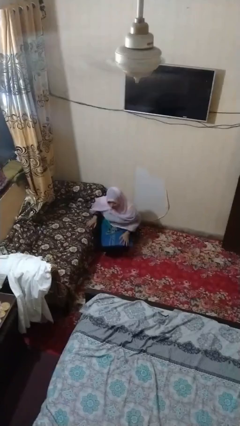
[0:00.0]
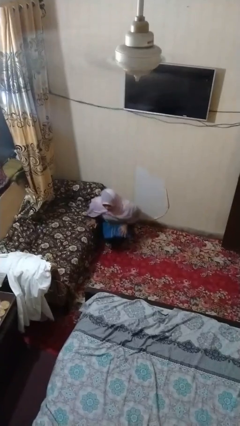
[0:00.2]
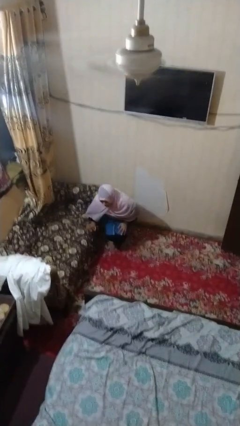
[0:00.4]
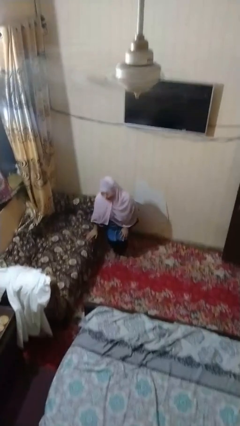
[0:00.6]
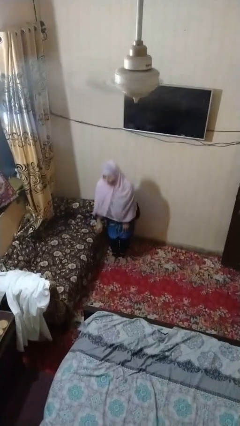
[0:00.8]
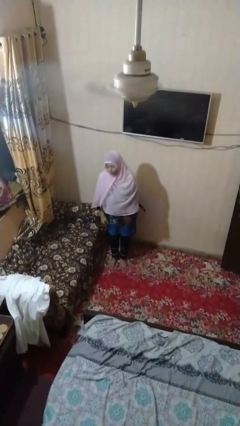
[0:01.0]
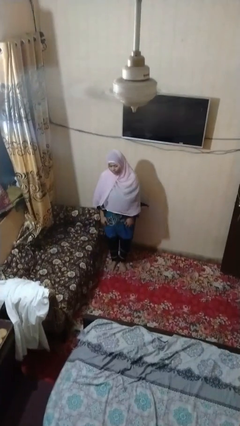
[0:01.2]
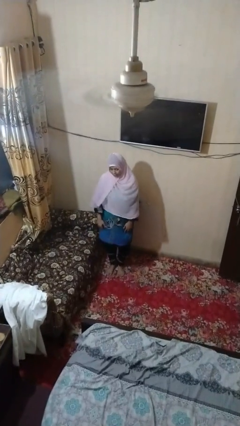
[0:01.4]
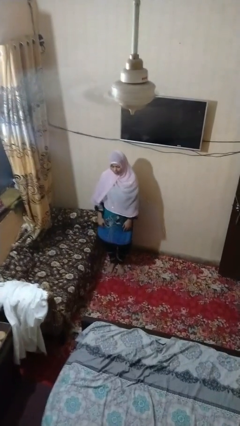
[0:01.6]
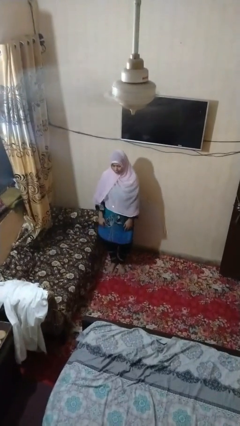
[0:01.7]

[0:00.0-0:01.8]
person stands up

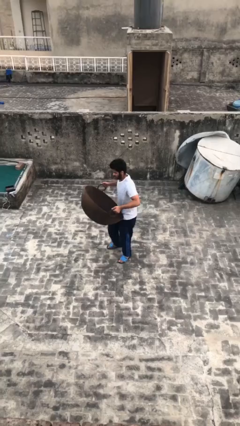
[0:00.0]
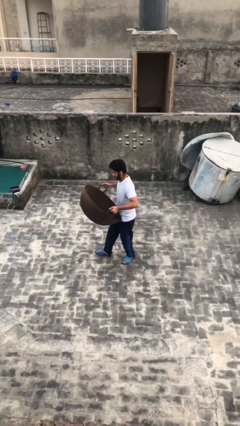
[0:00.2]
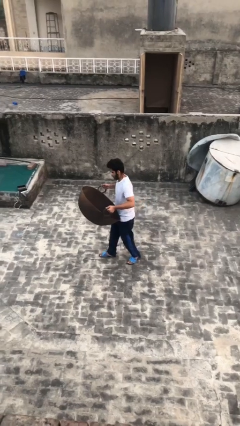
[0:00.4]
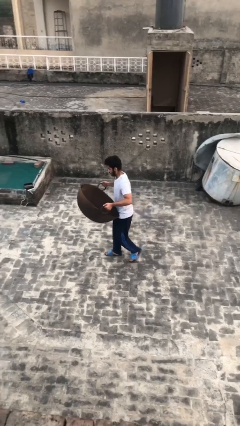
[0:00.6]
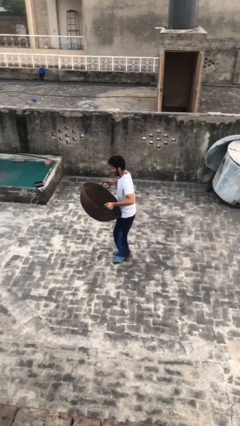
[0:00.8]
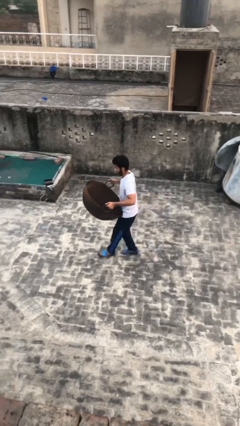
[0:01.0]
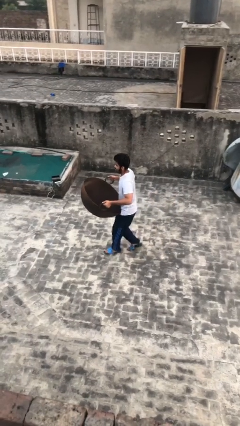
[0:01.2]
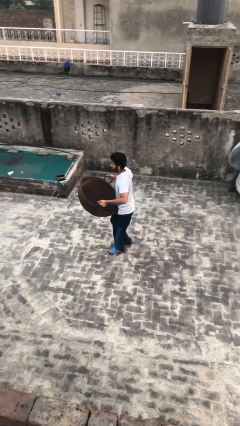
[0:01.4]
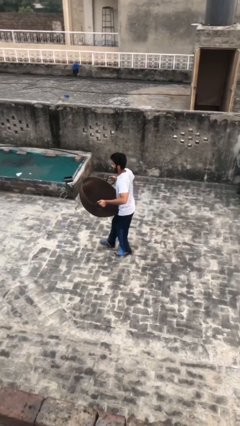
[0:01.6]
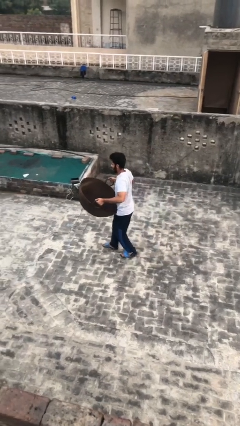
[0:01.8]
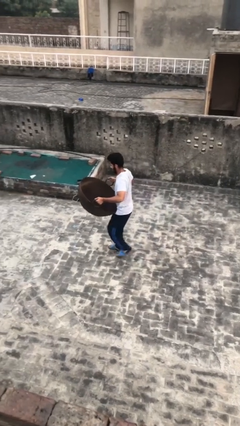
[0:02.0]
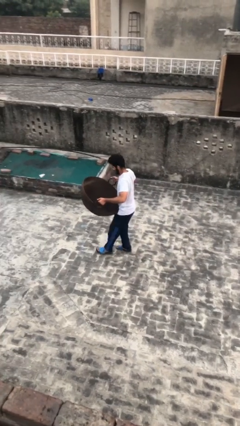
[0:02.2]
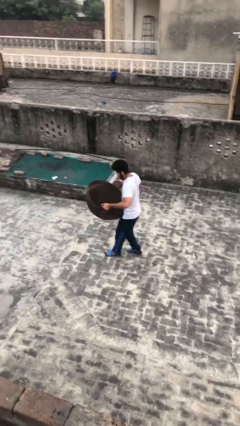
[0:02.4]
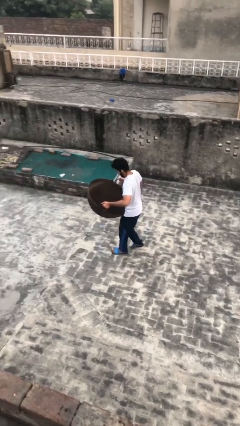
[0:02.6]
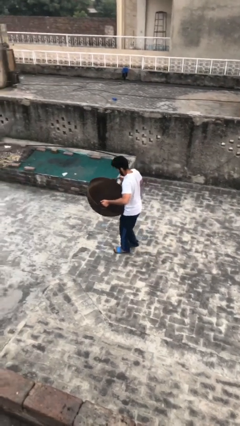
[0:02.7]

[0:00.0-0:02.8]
person carries heavy object

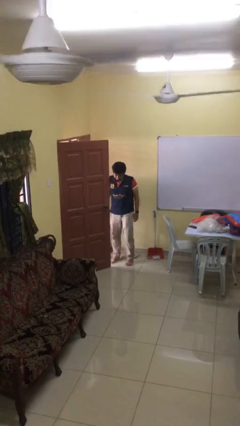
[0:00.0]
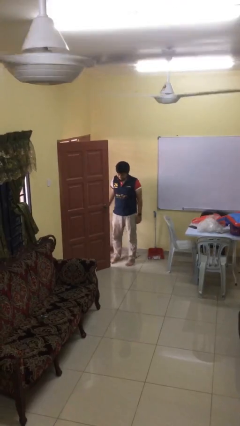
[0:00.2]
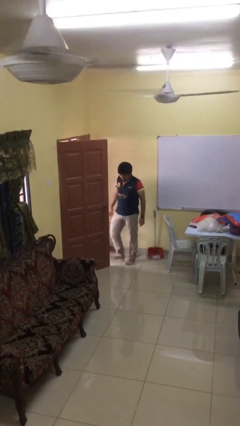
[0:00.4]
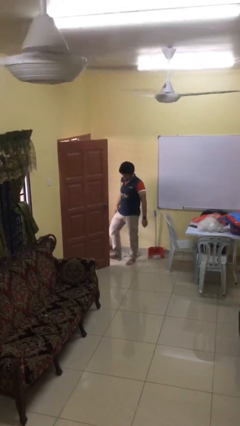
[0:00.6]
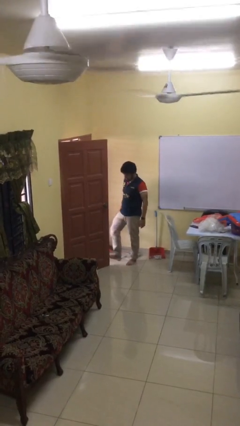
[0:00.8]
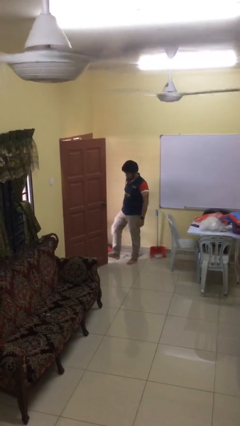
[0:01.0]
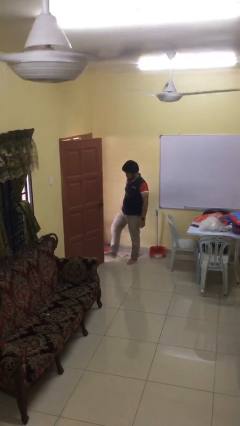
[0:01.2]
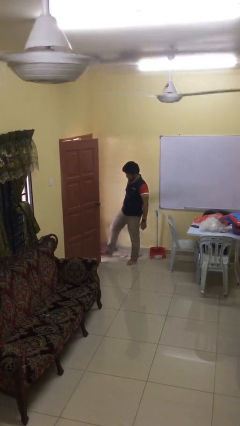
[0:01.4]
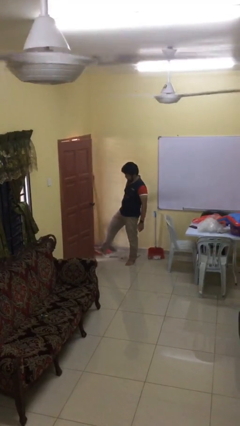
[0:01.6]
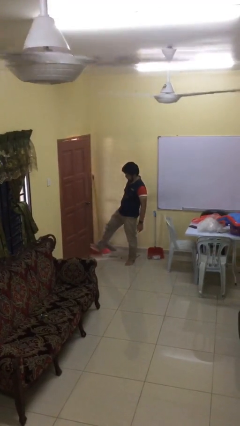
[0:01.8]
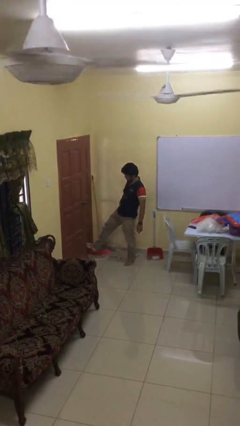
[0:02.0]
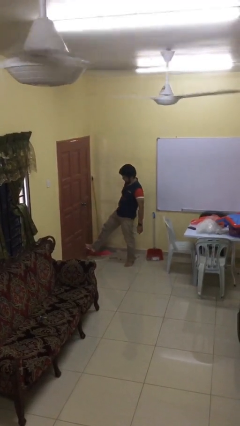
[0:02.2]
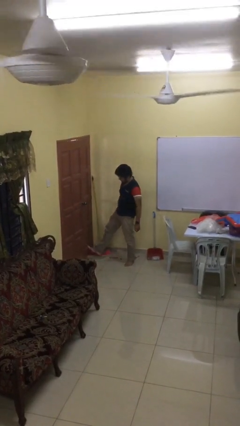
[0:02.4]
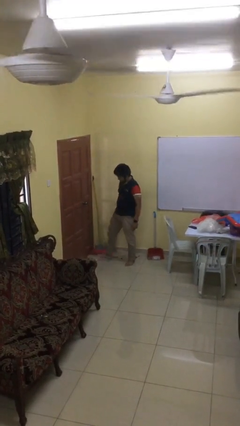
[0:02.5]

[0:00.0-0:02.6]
person closes door with foot

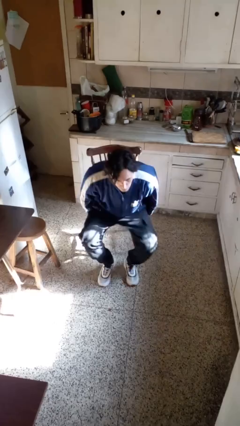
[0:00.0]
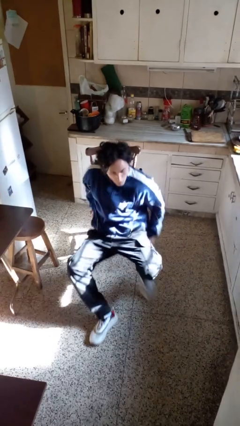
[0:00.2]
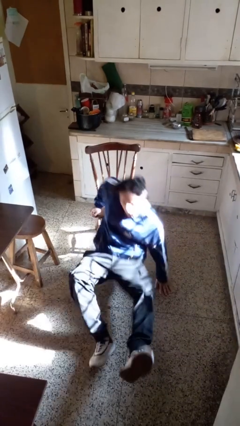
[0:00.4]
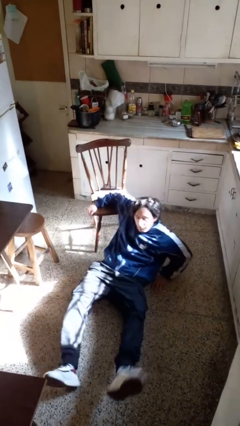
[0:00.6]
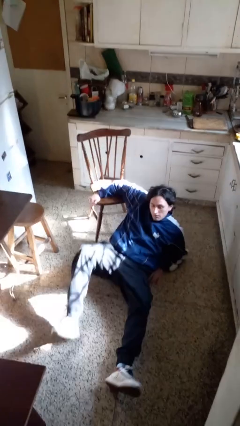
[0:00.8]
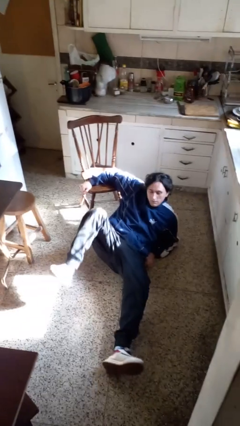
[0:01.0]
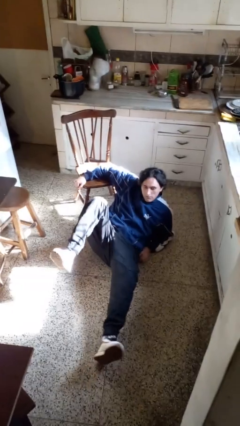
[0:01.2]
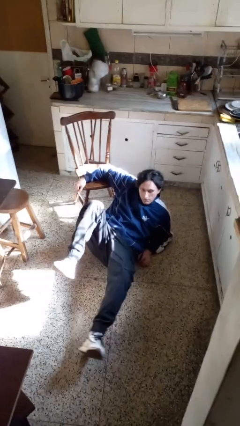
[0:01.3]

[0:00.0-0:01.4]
person falls from chair

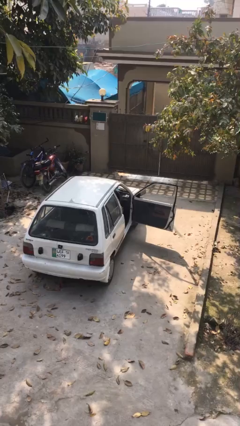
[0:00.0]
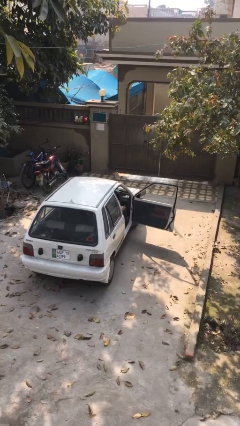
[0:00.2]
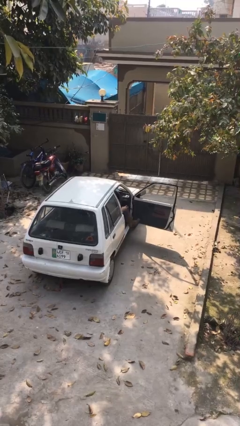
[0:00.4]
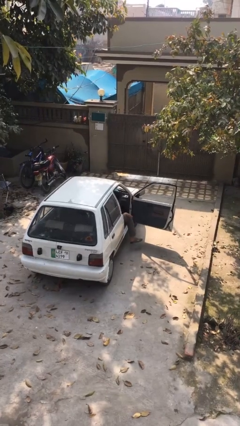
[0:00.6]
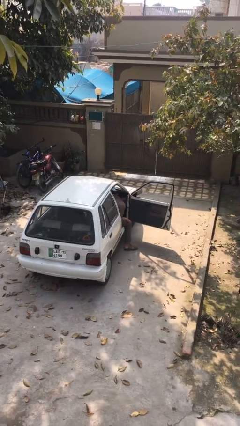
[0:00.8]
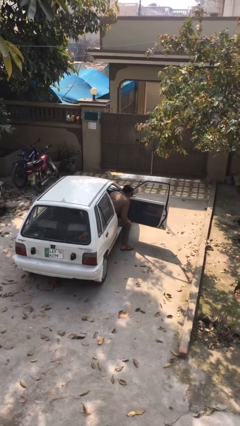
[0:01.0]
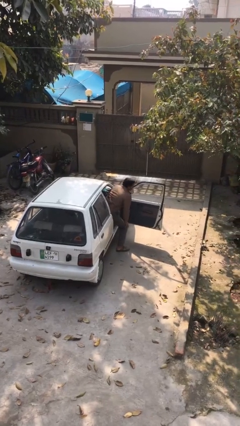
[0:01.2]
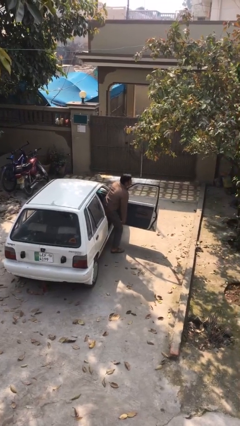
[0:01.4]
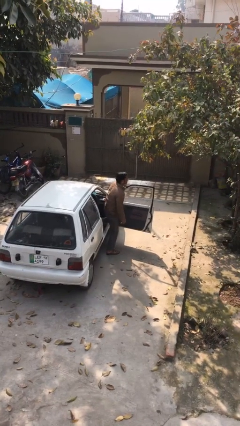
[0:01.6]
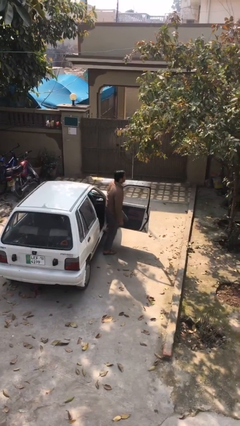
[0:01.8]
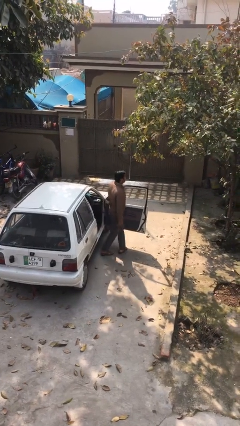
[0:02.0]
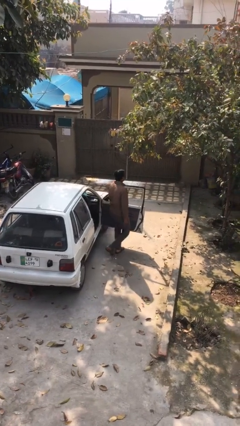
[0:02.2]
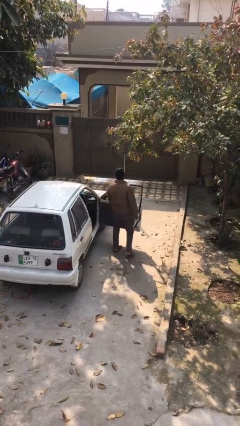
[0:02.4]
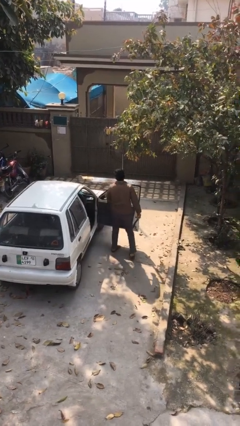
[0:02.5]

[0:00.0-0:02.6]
person exits car

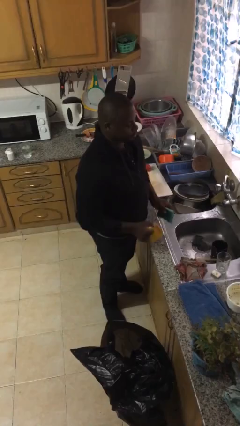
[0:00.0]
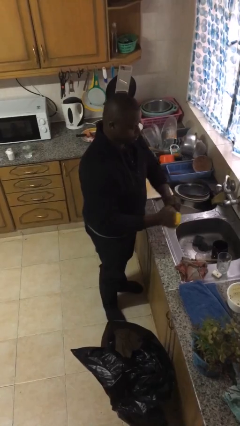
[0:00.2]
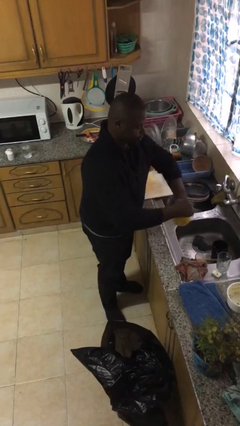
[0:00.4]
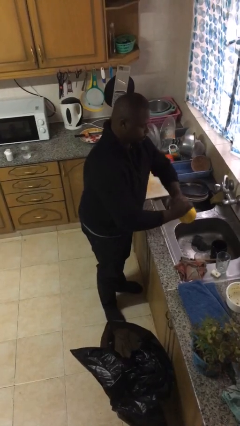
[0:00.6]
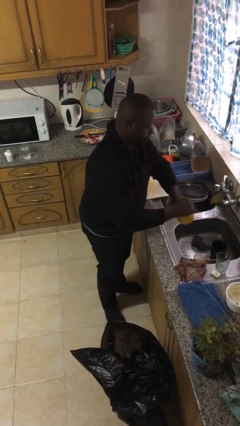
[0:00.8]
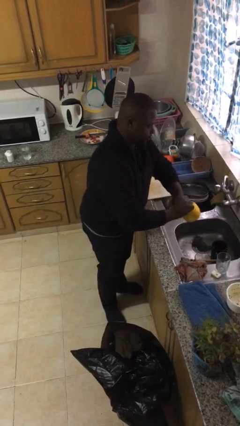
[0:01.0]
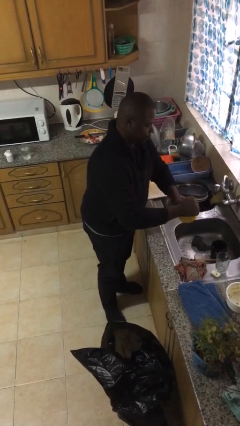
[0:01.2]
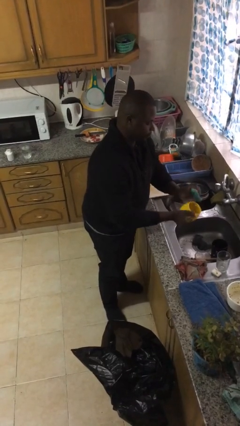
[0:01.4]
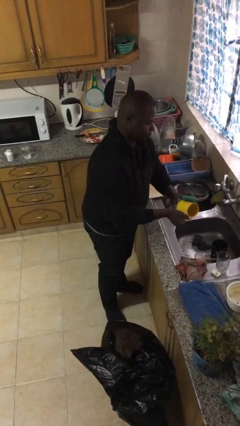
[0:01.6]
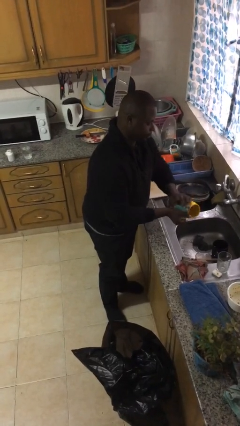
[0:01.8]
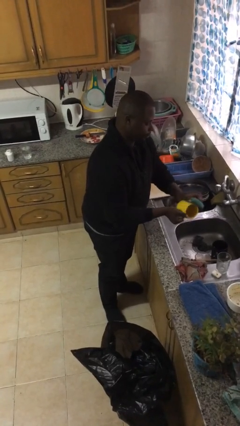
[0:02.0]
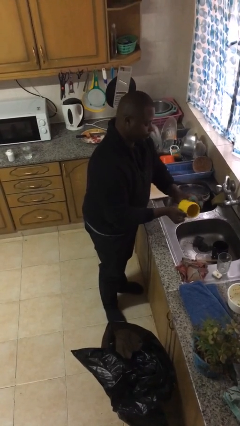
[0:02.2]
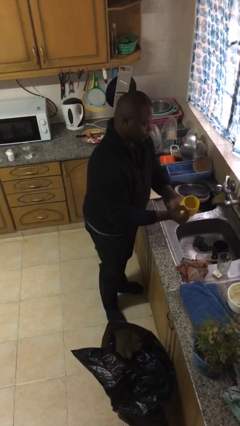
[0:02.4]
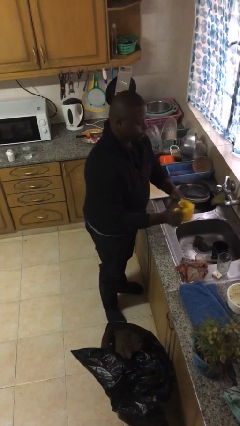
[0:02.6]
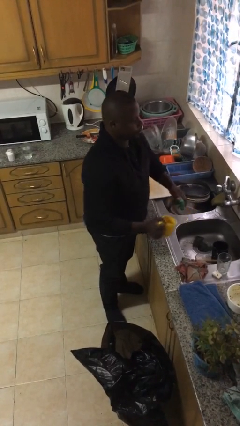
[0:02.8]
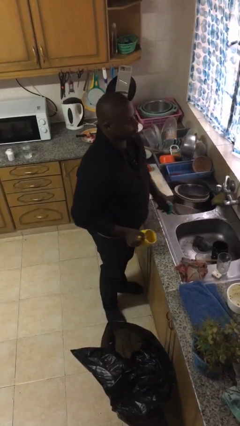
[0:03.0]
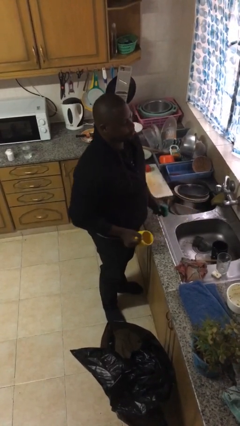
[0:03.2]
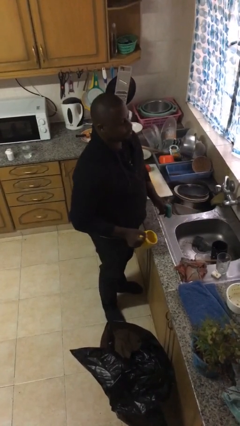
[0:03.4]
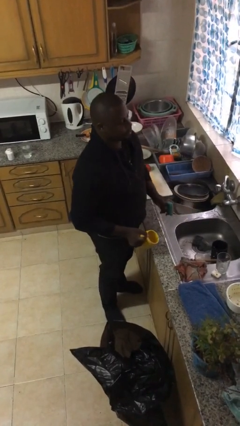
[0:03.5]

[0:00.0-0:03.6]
person washes dish

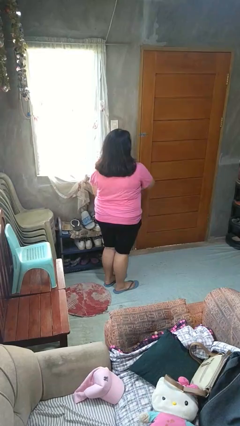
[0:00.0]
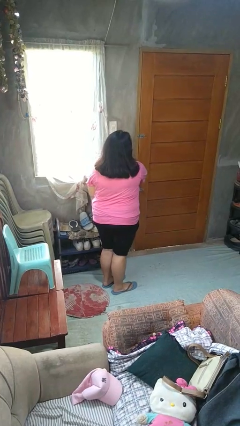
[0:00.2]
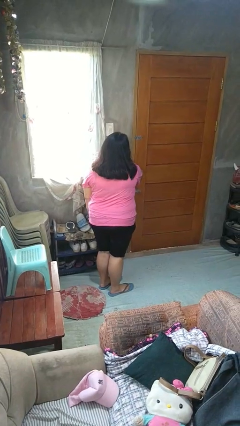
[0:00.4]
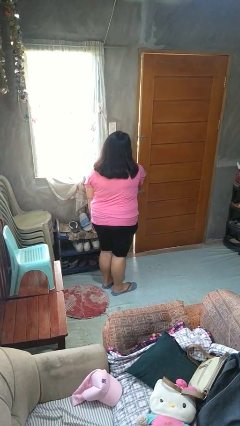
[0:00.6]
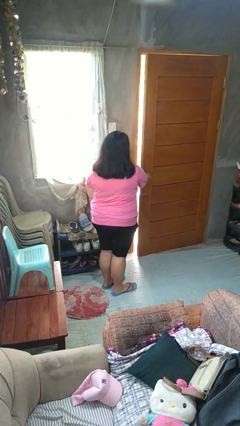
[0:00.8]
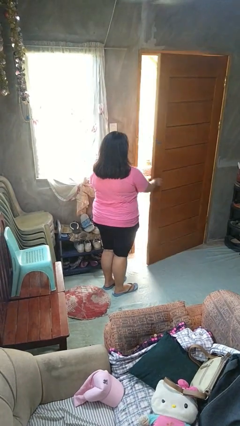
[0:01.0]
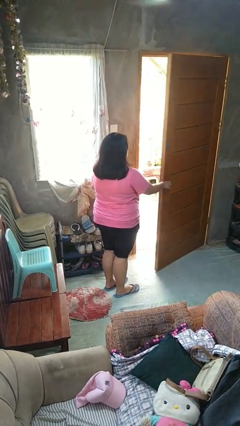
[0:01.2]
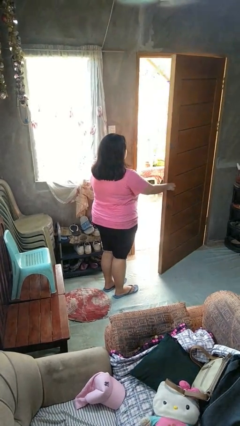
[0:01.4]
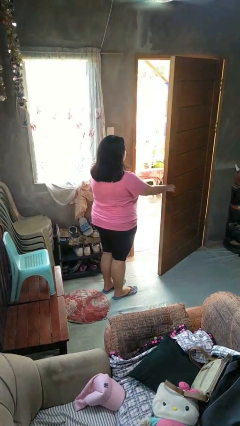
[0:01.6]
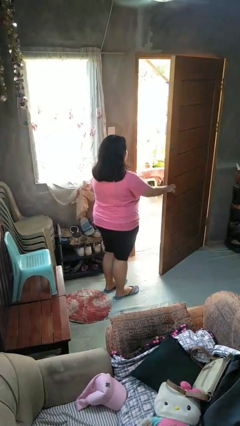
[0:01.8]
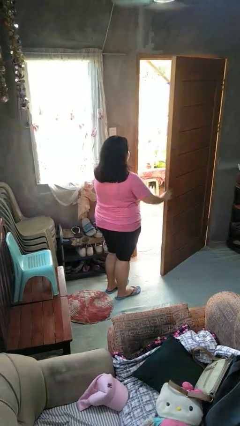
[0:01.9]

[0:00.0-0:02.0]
person opens facility door

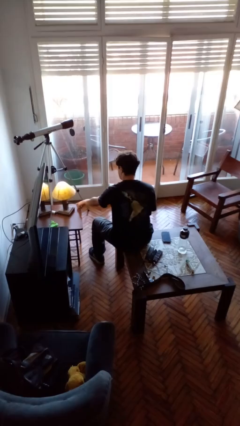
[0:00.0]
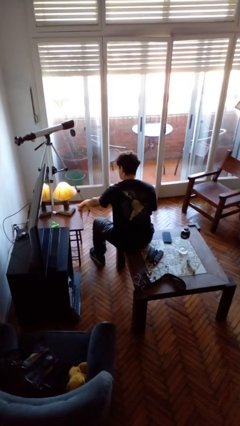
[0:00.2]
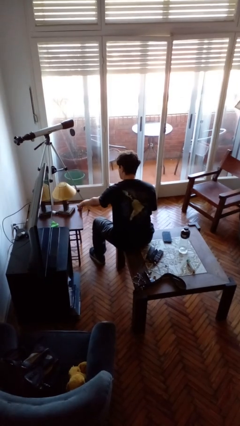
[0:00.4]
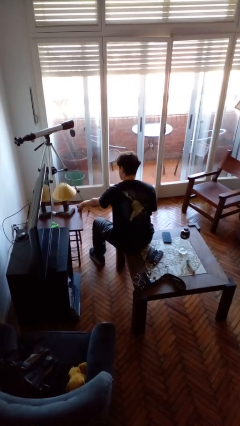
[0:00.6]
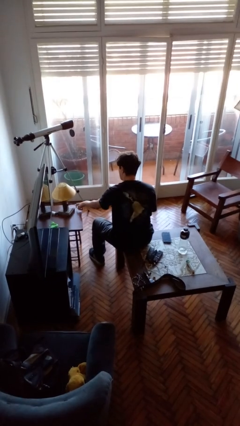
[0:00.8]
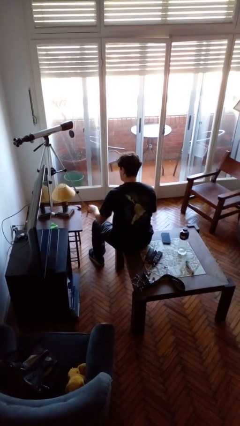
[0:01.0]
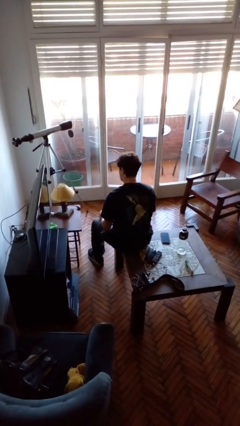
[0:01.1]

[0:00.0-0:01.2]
person turns off lamp
